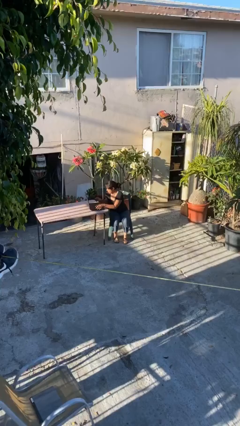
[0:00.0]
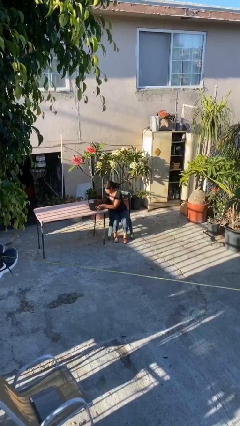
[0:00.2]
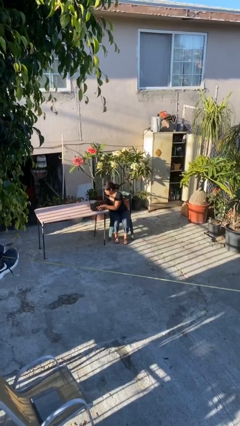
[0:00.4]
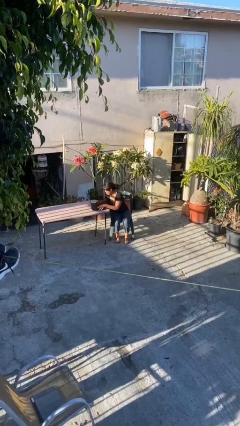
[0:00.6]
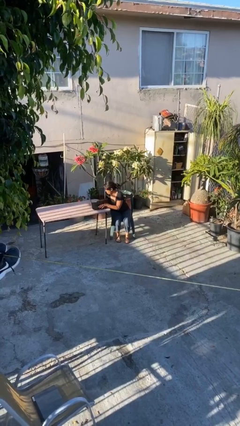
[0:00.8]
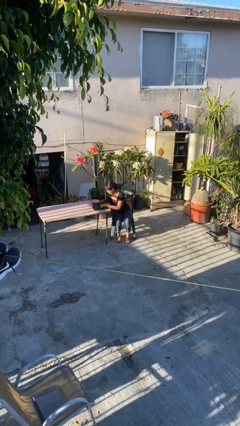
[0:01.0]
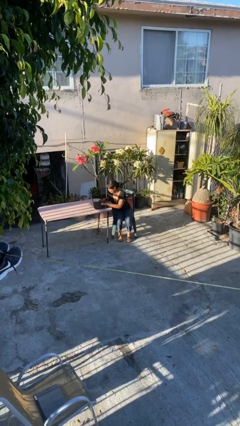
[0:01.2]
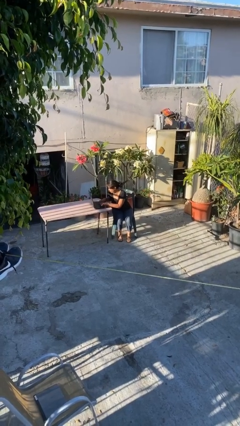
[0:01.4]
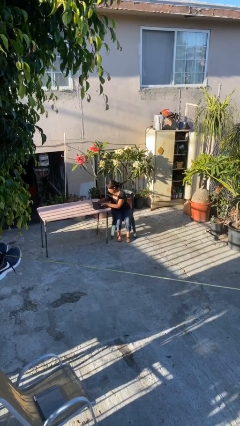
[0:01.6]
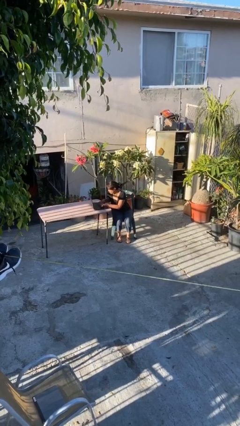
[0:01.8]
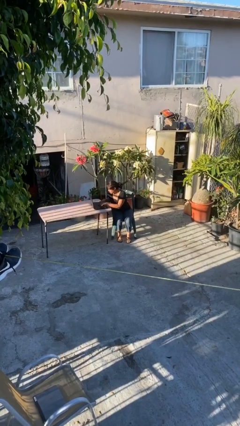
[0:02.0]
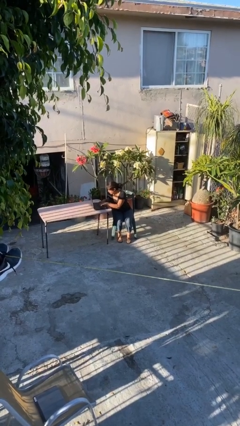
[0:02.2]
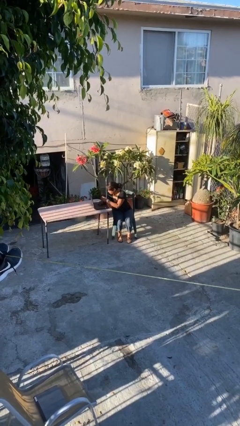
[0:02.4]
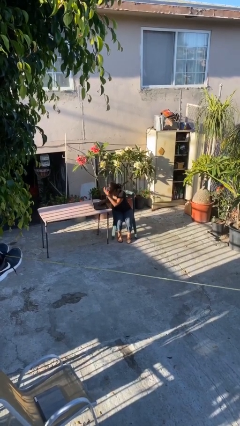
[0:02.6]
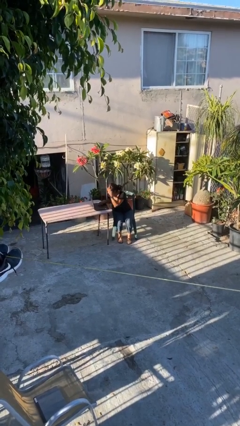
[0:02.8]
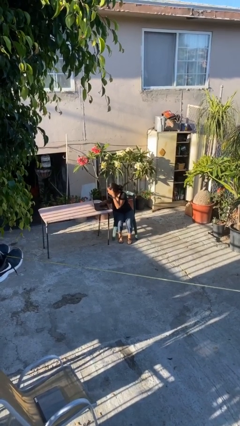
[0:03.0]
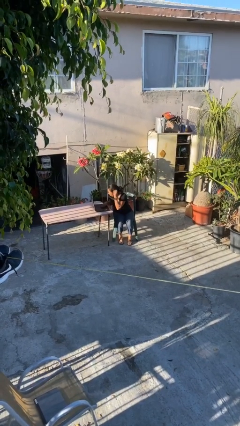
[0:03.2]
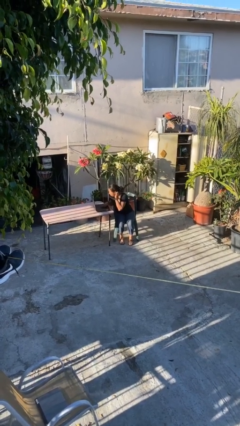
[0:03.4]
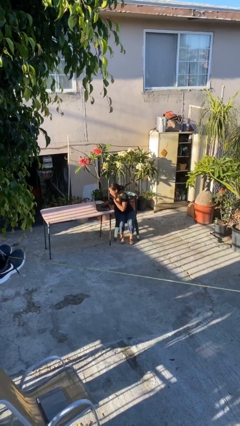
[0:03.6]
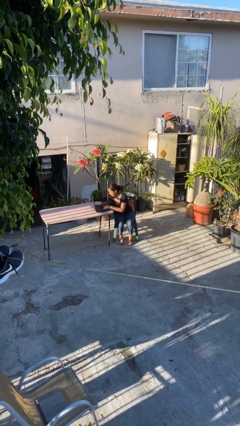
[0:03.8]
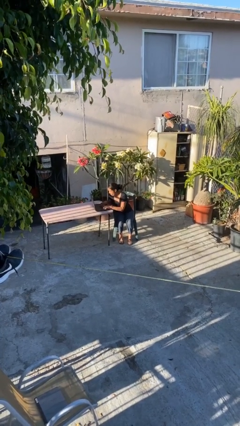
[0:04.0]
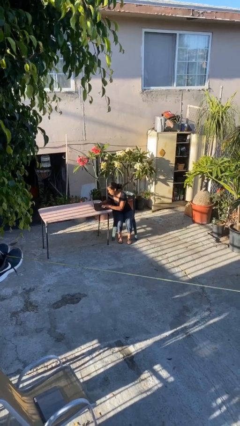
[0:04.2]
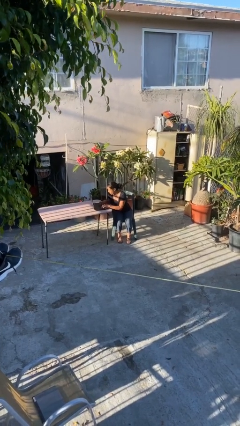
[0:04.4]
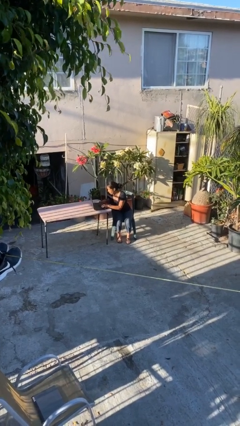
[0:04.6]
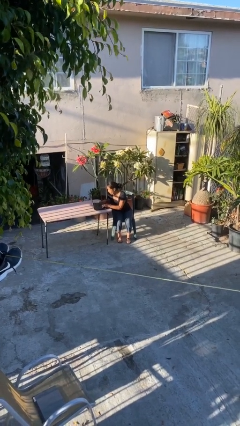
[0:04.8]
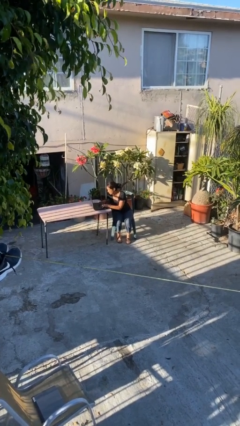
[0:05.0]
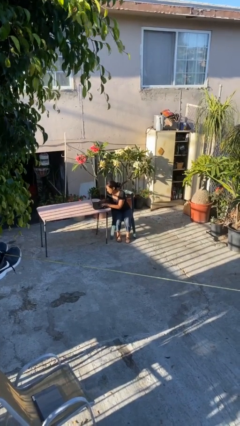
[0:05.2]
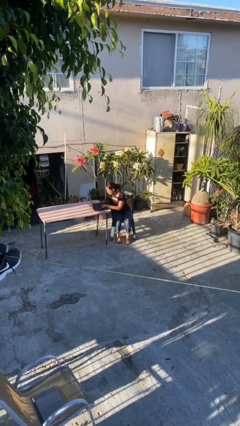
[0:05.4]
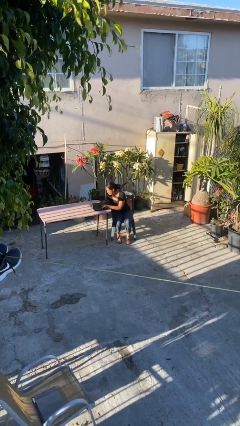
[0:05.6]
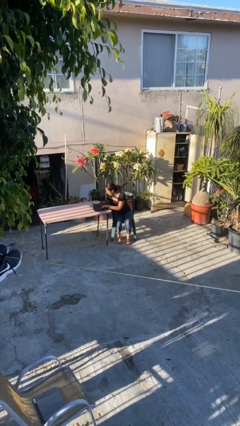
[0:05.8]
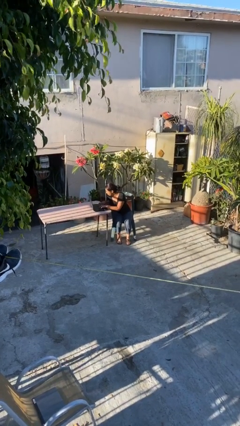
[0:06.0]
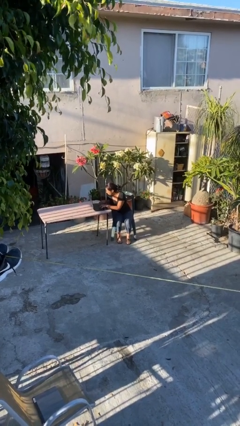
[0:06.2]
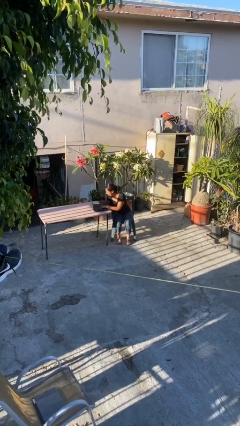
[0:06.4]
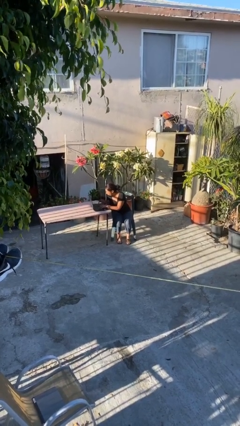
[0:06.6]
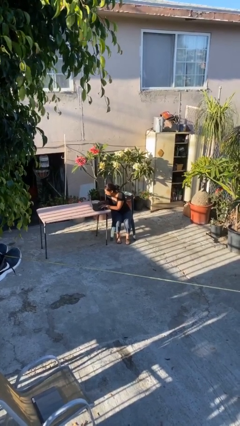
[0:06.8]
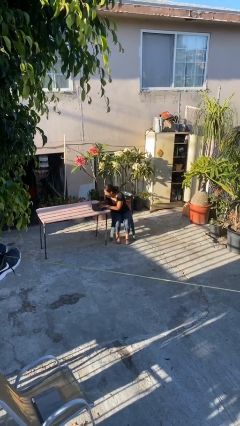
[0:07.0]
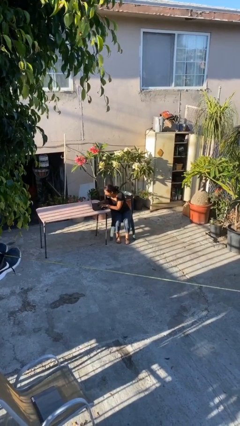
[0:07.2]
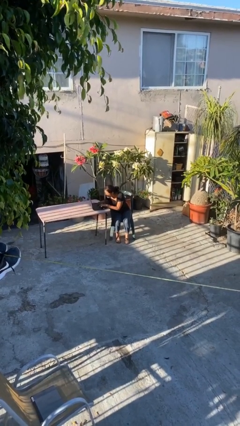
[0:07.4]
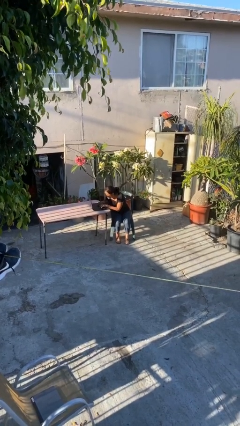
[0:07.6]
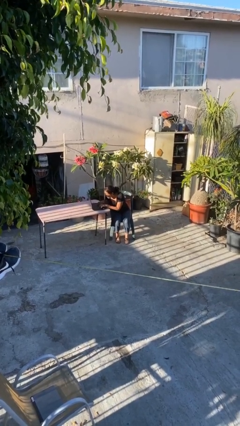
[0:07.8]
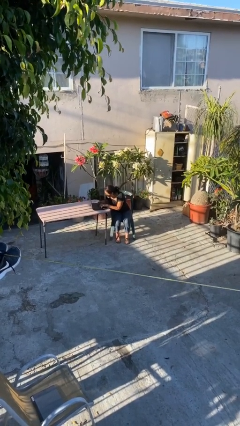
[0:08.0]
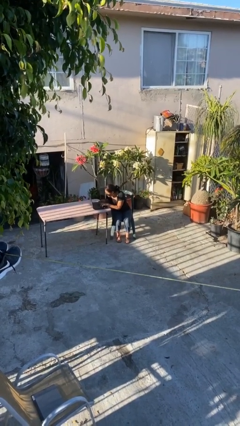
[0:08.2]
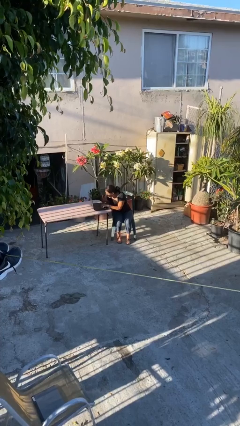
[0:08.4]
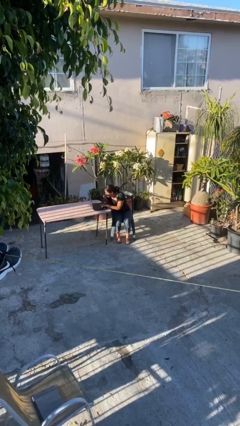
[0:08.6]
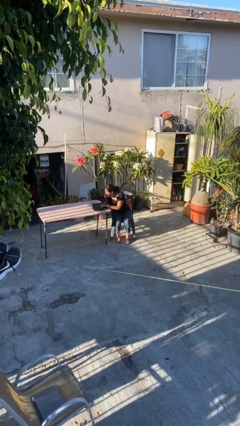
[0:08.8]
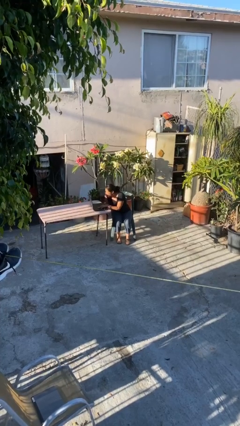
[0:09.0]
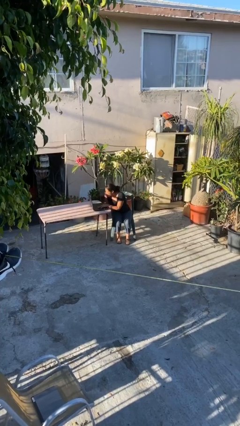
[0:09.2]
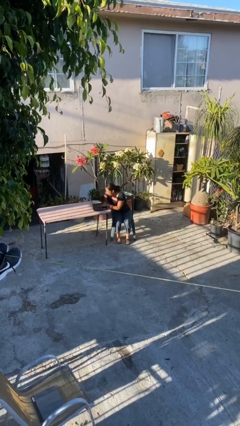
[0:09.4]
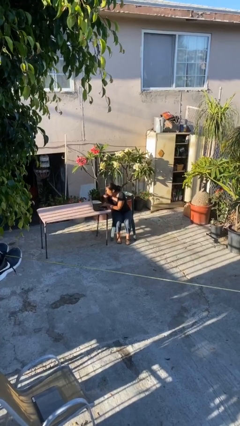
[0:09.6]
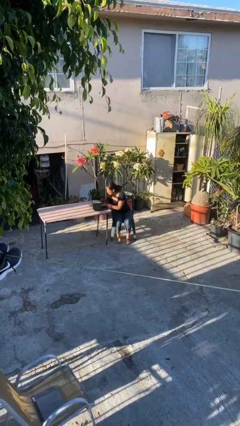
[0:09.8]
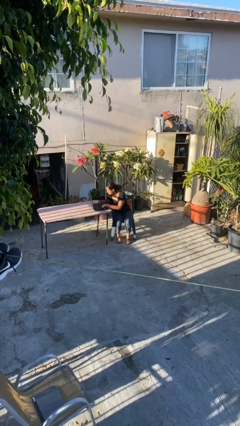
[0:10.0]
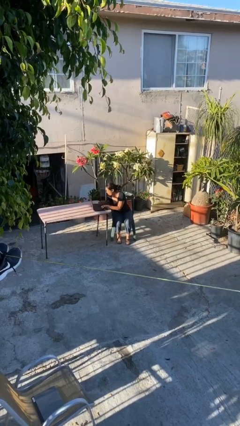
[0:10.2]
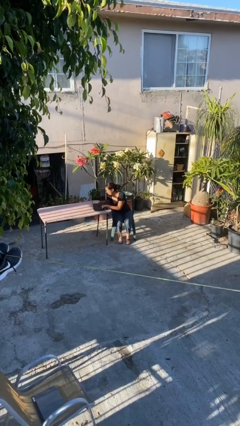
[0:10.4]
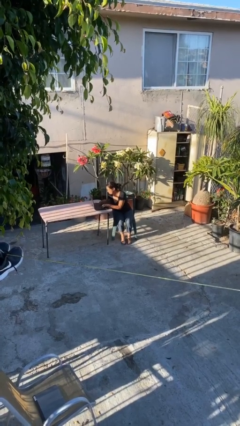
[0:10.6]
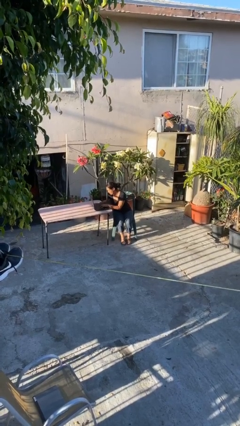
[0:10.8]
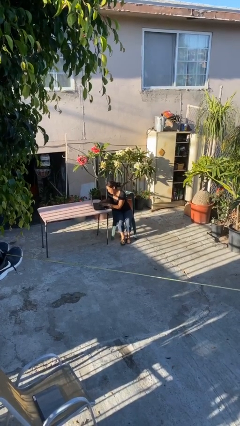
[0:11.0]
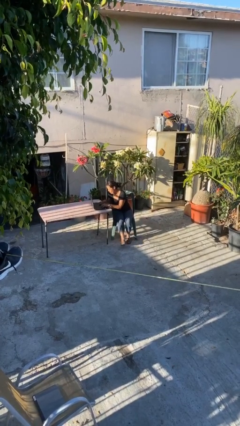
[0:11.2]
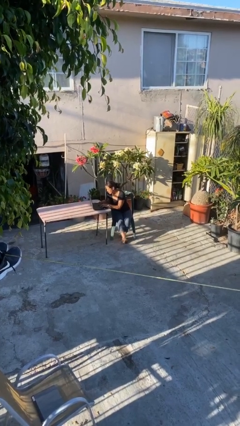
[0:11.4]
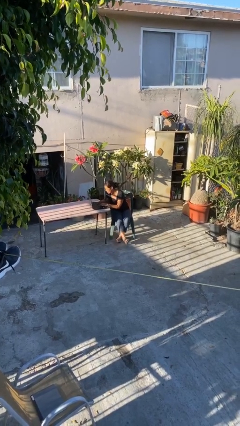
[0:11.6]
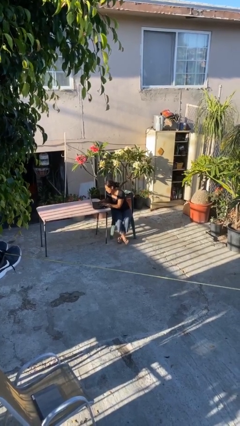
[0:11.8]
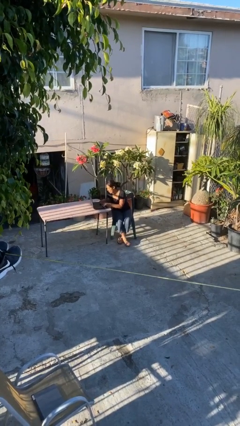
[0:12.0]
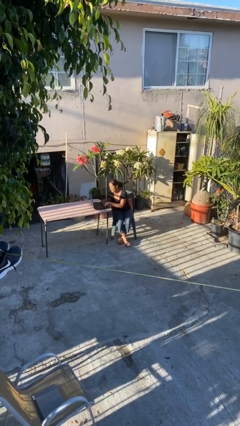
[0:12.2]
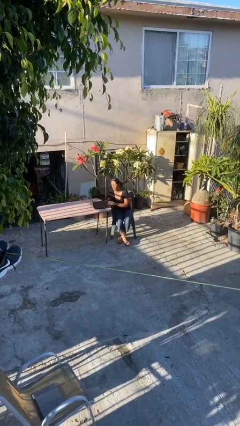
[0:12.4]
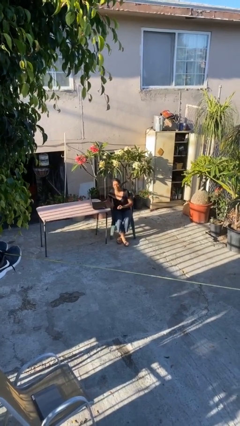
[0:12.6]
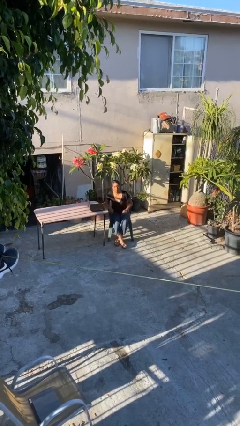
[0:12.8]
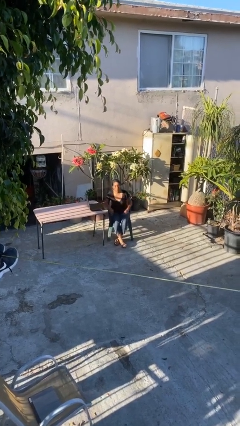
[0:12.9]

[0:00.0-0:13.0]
person interacts with laptop

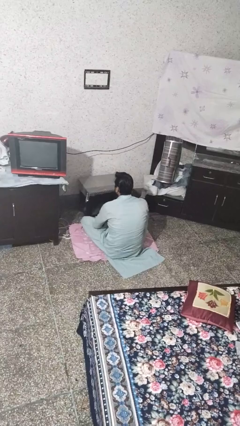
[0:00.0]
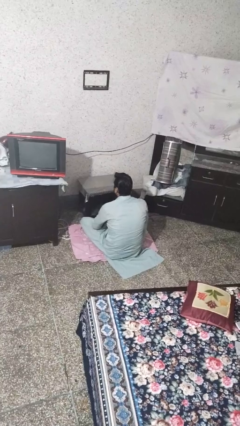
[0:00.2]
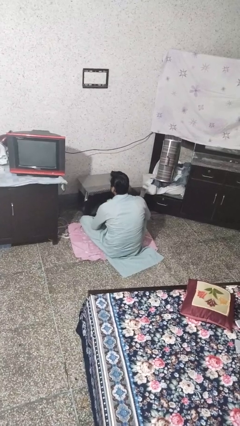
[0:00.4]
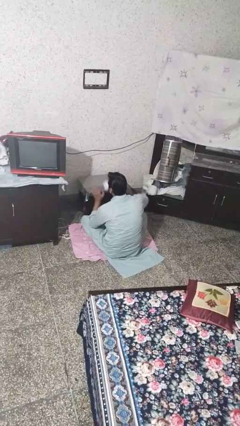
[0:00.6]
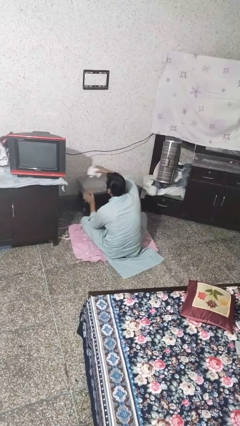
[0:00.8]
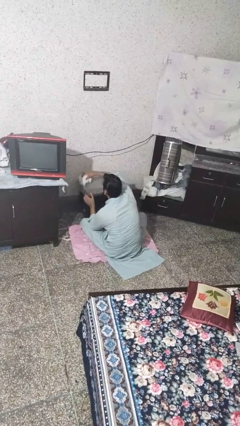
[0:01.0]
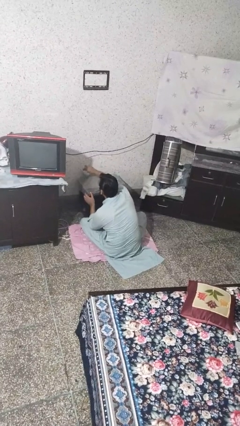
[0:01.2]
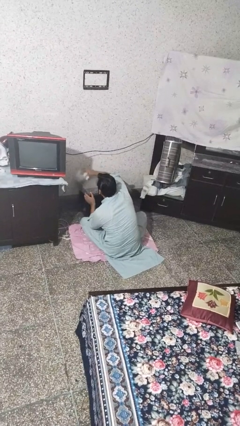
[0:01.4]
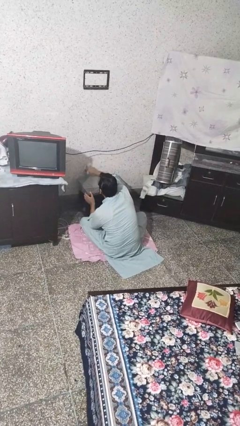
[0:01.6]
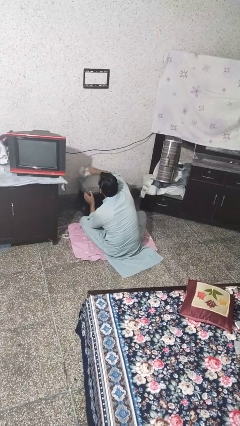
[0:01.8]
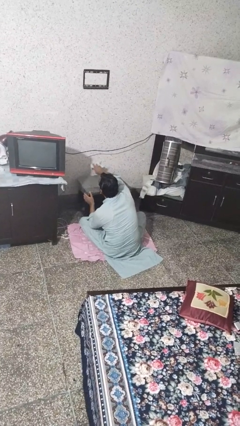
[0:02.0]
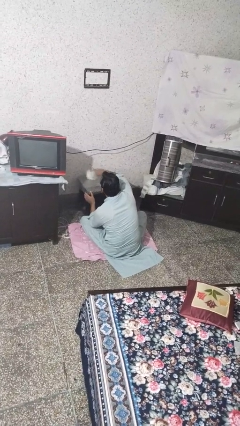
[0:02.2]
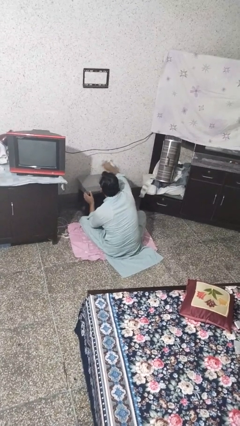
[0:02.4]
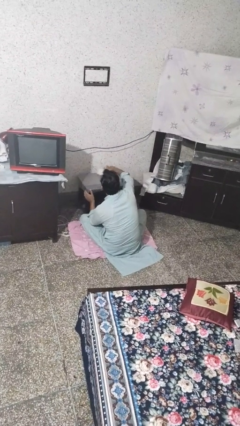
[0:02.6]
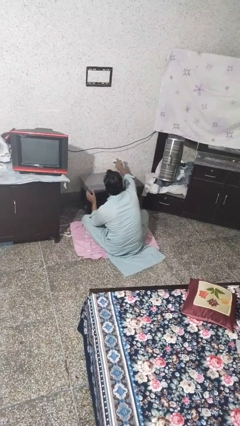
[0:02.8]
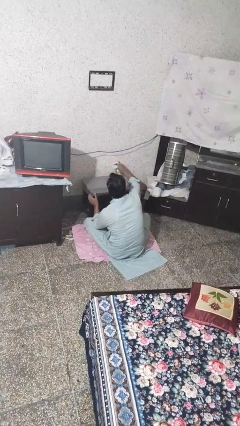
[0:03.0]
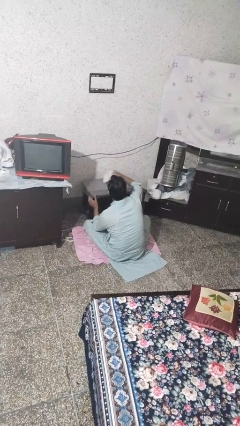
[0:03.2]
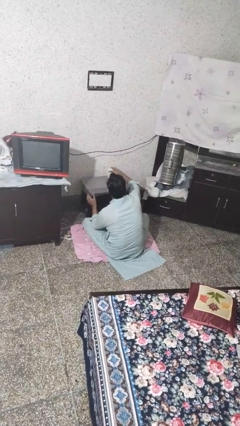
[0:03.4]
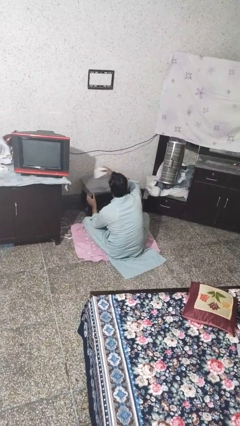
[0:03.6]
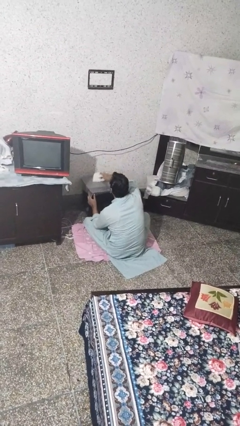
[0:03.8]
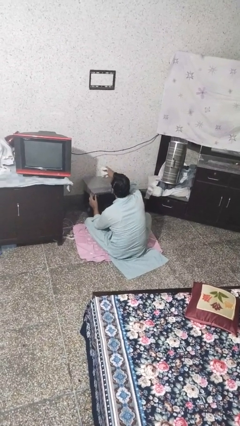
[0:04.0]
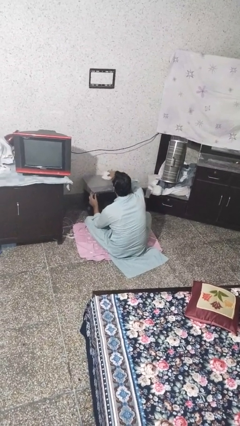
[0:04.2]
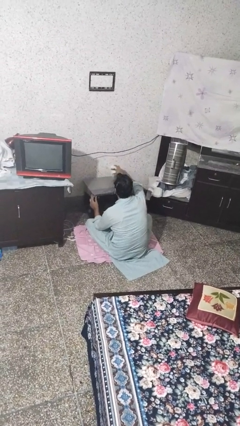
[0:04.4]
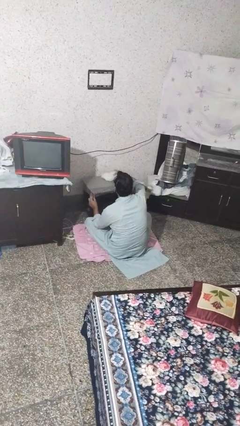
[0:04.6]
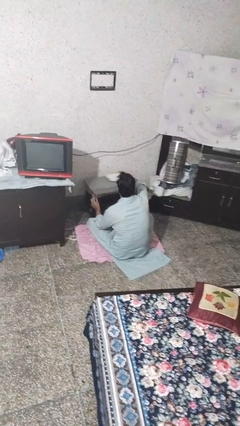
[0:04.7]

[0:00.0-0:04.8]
person cleans table with rag
